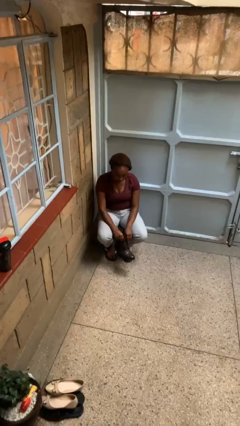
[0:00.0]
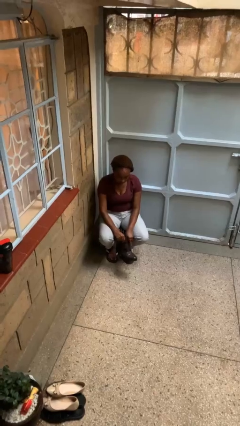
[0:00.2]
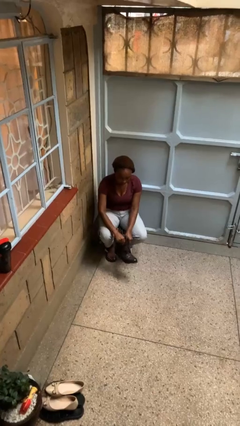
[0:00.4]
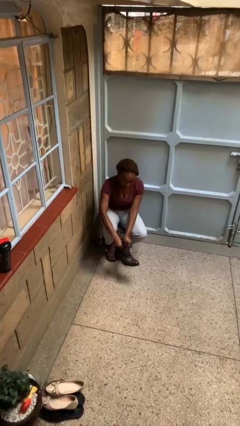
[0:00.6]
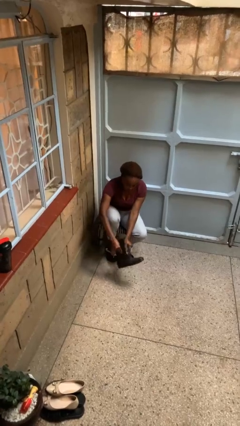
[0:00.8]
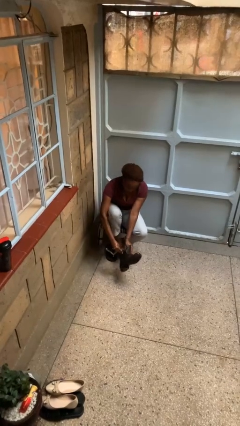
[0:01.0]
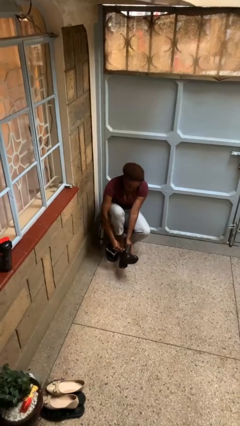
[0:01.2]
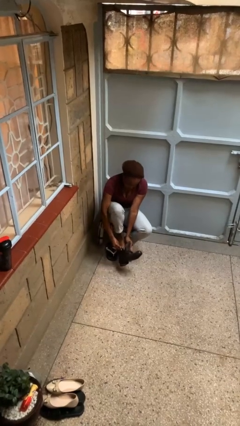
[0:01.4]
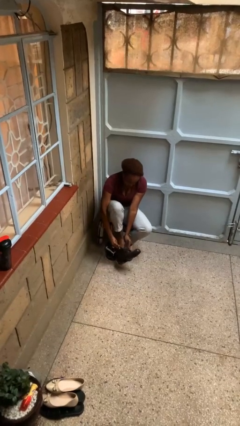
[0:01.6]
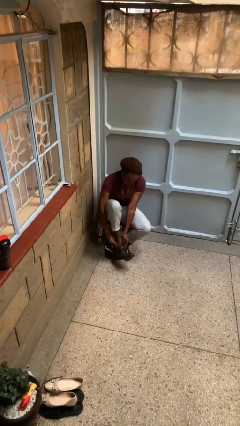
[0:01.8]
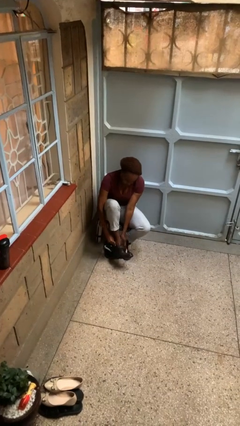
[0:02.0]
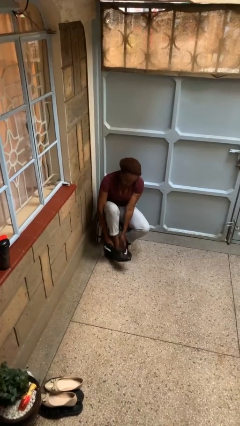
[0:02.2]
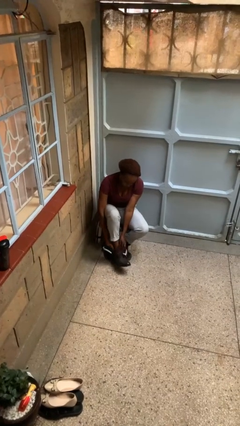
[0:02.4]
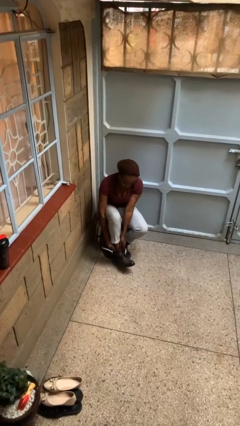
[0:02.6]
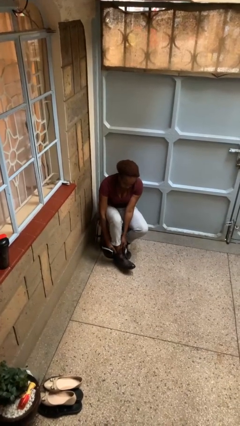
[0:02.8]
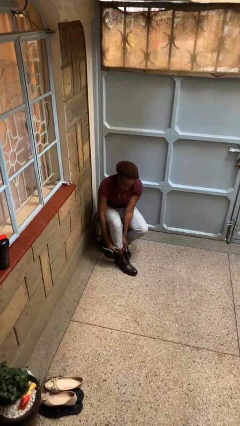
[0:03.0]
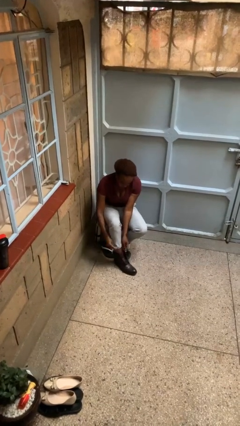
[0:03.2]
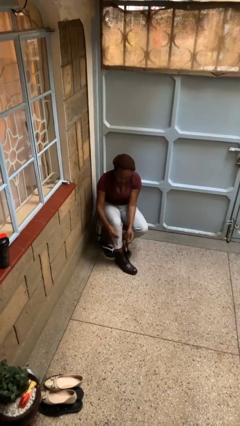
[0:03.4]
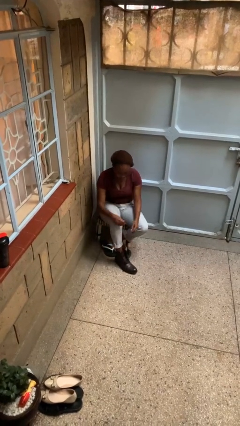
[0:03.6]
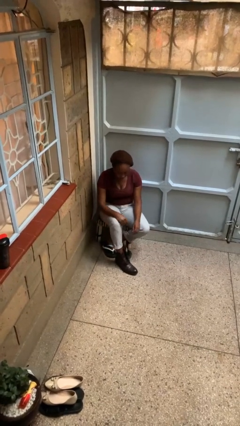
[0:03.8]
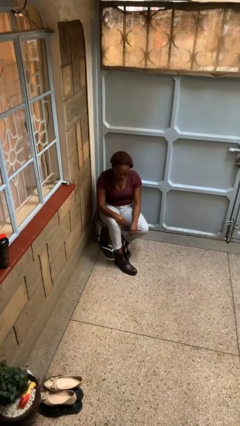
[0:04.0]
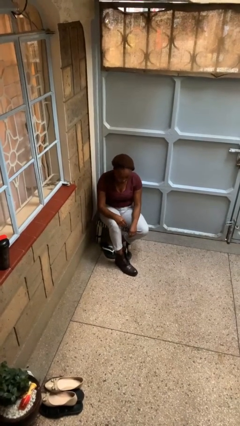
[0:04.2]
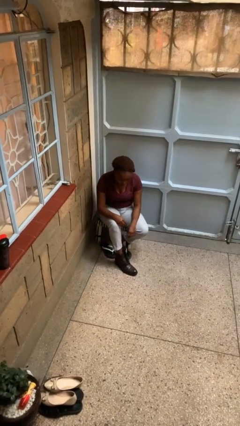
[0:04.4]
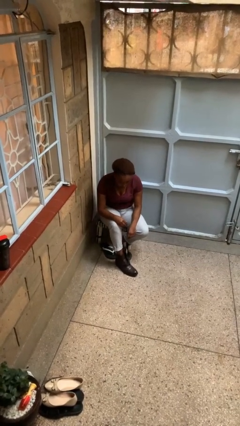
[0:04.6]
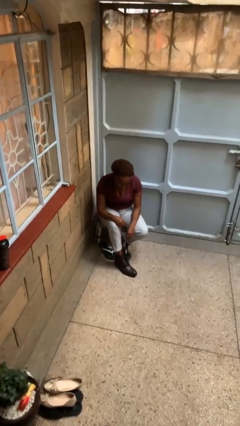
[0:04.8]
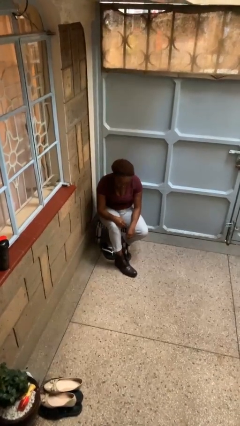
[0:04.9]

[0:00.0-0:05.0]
person puts on boots

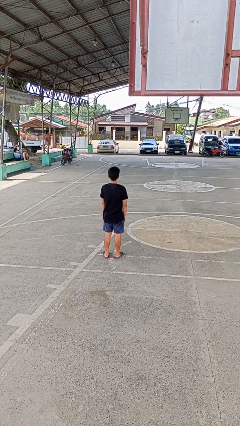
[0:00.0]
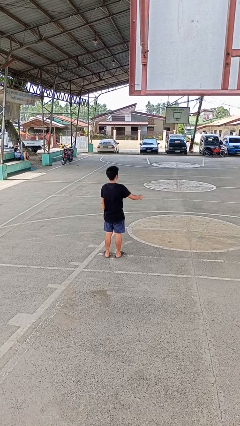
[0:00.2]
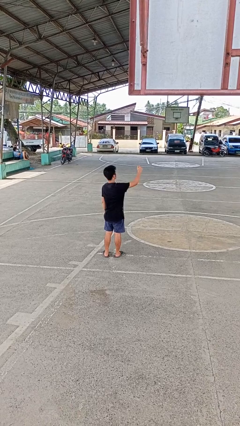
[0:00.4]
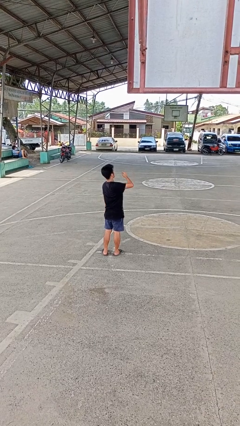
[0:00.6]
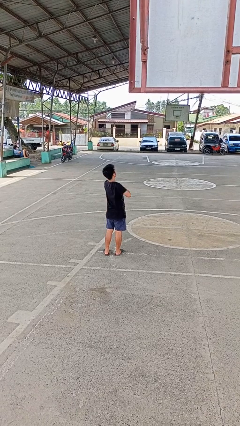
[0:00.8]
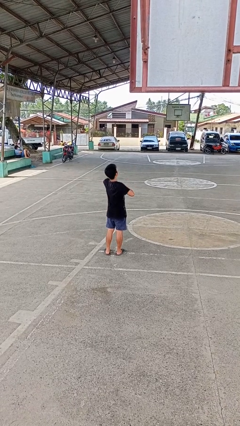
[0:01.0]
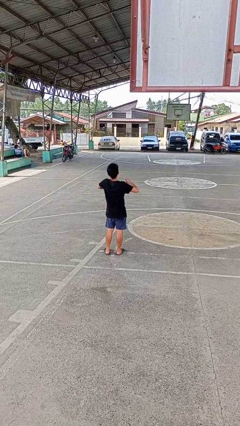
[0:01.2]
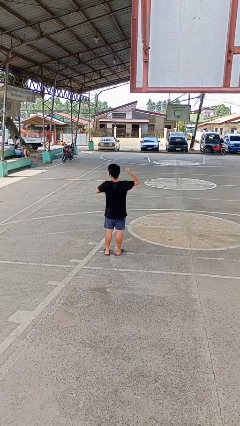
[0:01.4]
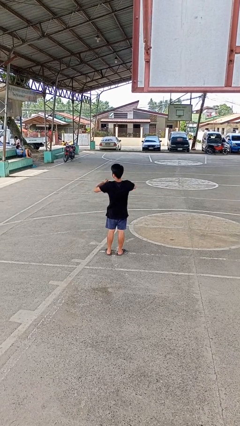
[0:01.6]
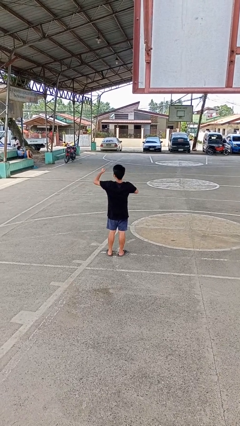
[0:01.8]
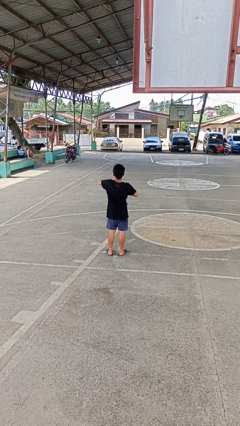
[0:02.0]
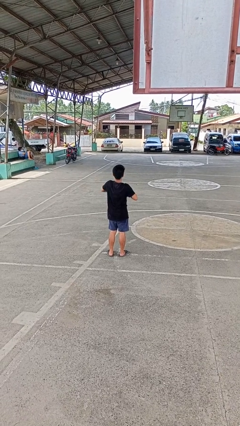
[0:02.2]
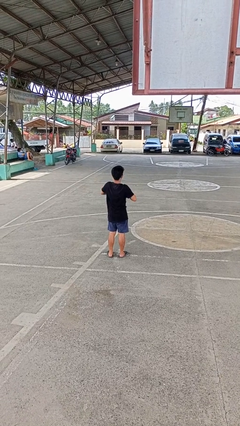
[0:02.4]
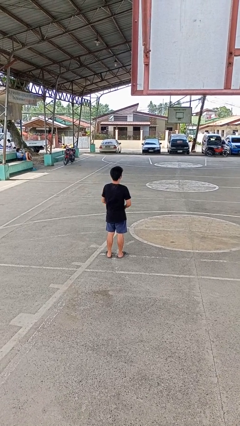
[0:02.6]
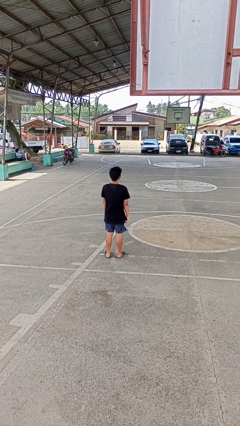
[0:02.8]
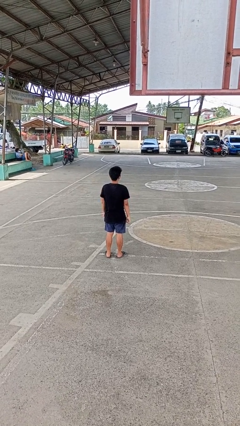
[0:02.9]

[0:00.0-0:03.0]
person drums on chest

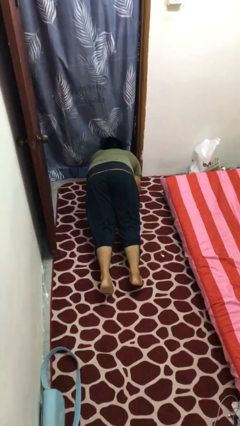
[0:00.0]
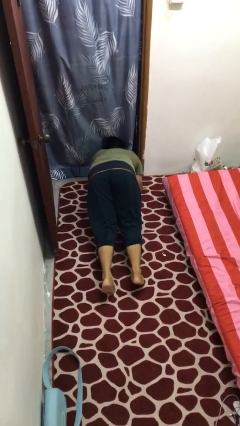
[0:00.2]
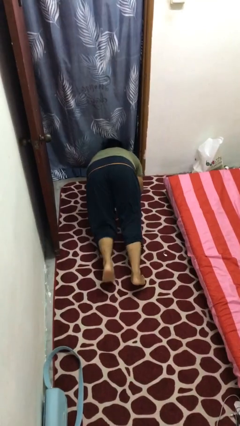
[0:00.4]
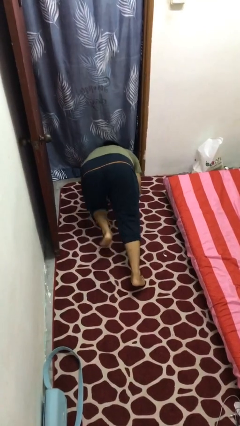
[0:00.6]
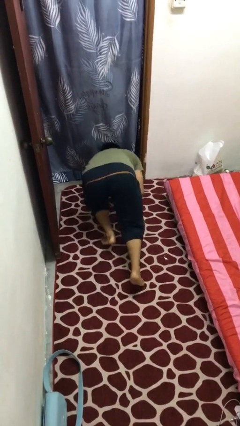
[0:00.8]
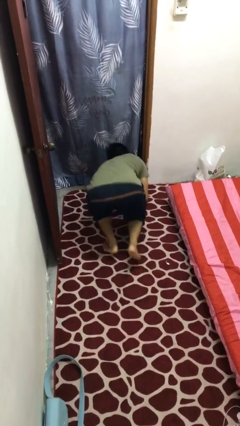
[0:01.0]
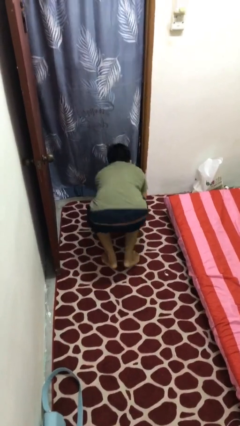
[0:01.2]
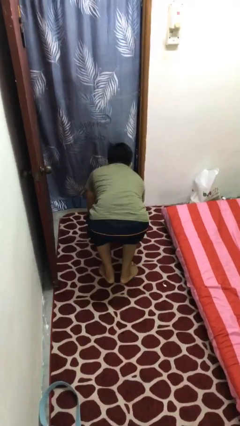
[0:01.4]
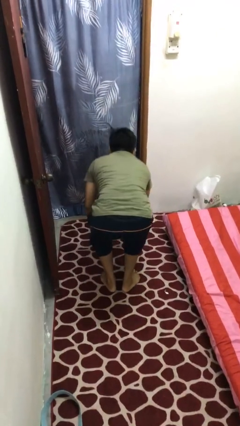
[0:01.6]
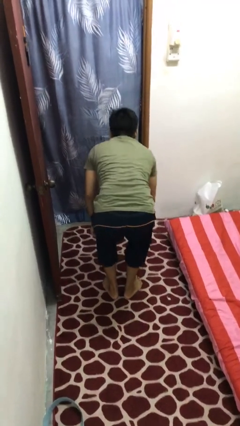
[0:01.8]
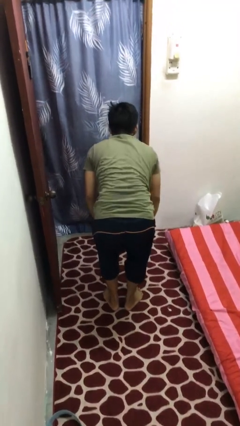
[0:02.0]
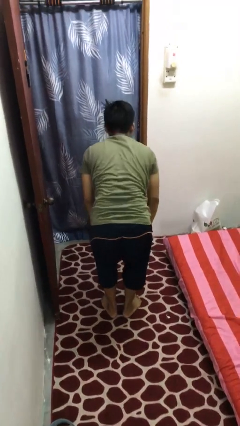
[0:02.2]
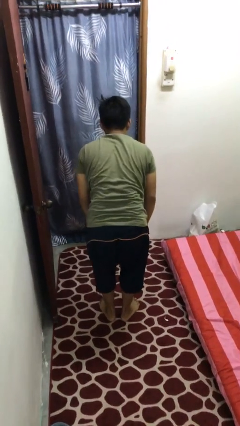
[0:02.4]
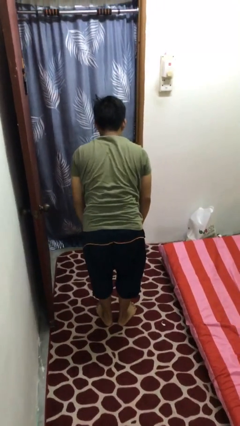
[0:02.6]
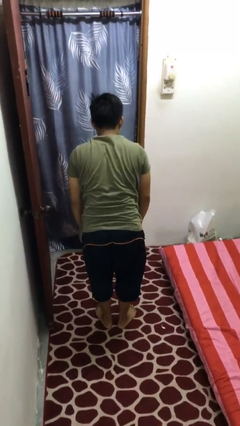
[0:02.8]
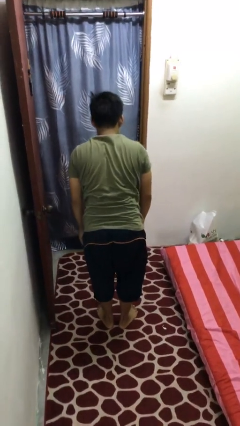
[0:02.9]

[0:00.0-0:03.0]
person stands up from floor

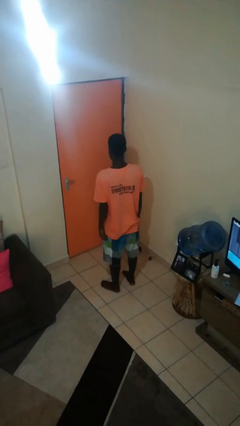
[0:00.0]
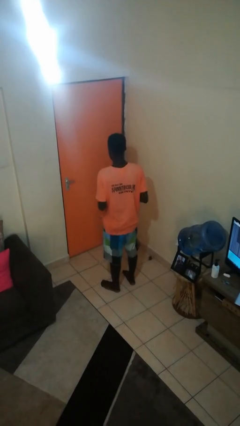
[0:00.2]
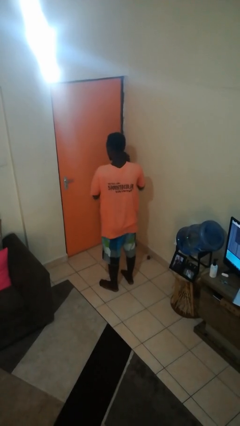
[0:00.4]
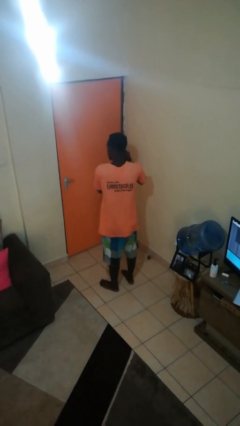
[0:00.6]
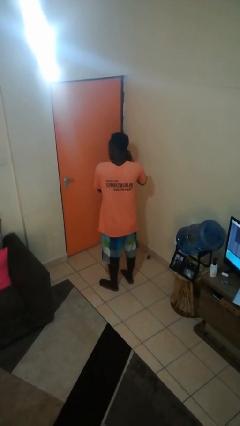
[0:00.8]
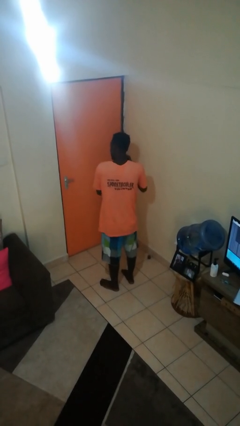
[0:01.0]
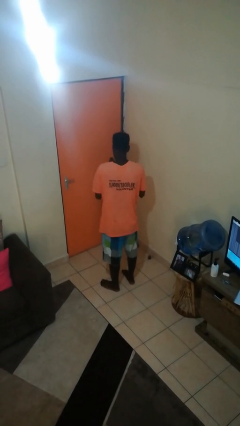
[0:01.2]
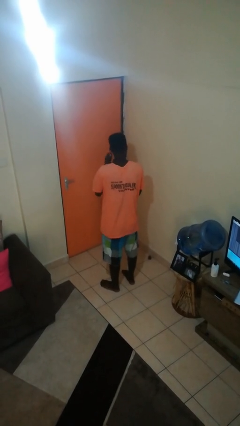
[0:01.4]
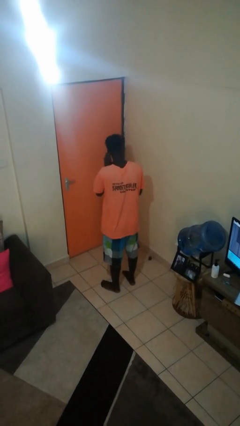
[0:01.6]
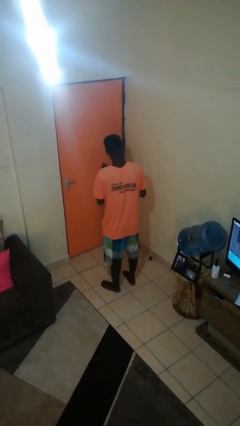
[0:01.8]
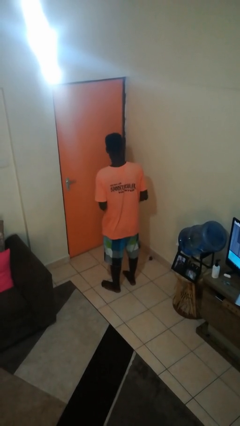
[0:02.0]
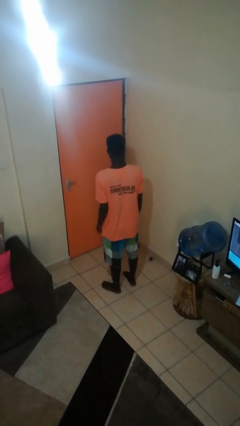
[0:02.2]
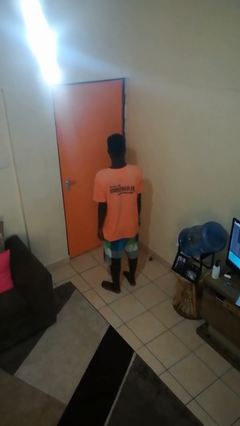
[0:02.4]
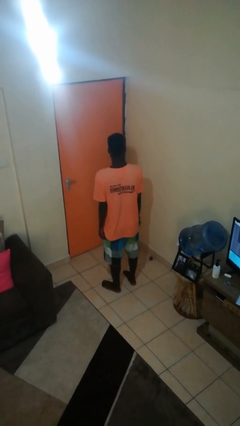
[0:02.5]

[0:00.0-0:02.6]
person takes off earrings

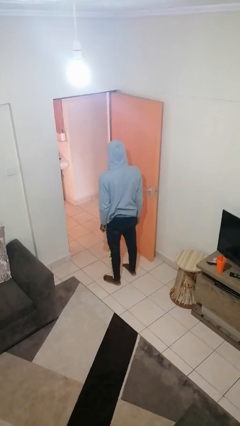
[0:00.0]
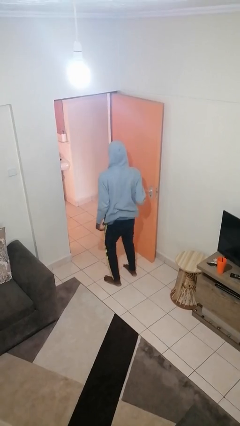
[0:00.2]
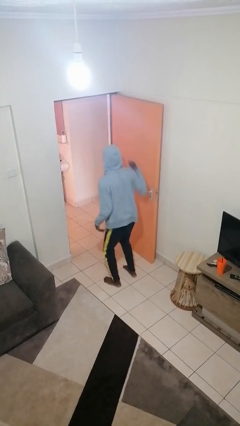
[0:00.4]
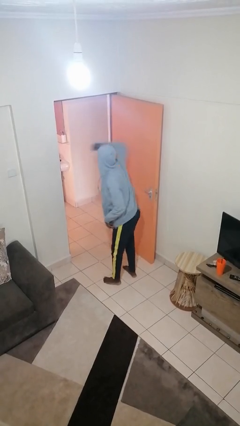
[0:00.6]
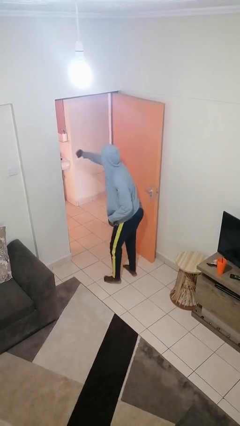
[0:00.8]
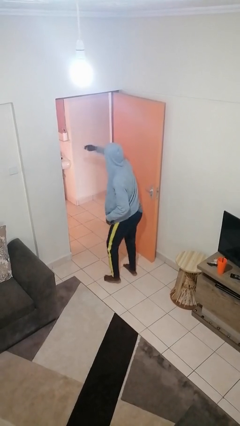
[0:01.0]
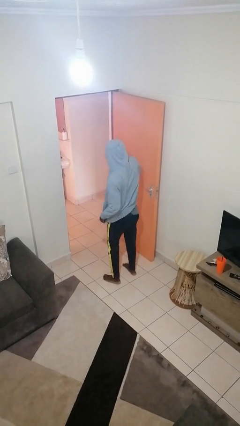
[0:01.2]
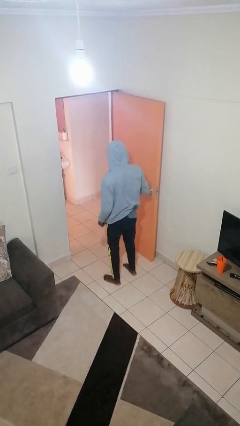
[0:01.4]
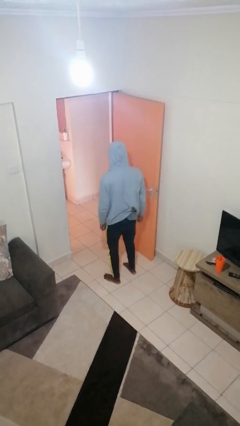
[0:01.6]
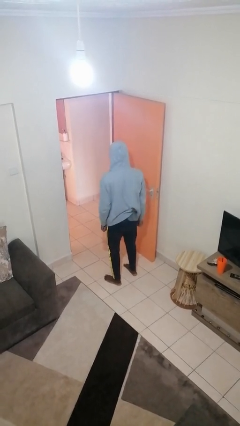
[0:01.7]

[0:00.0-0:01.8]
person punches

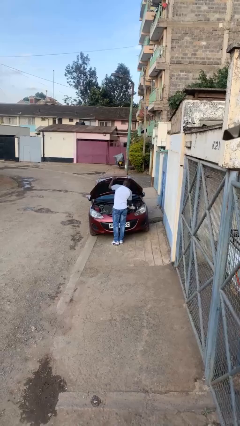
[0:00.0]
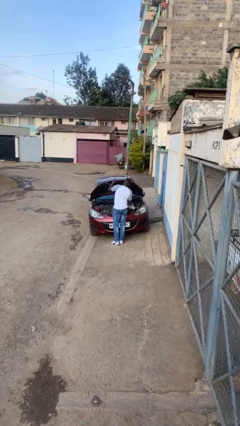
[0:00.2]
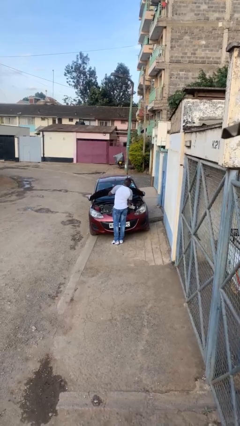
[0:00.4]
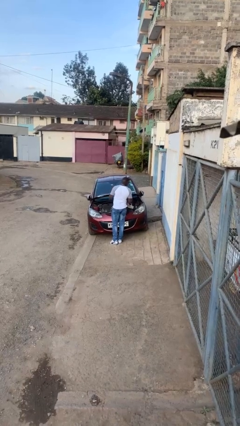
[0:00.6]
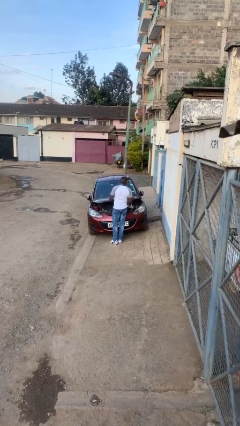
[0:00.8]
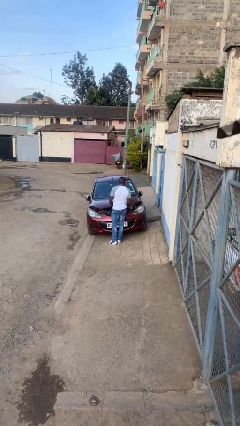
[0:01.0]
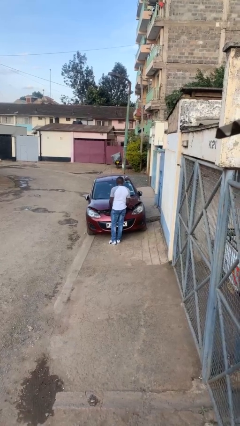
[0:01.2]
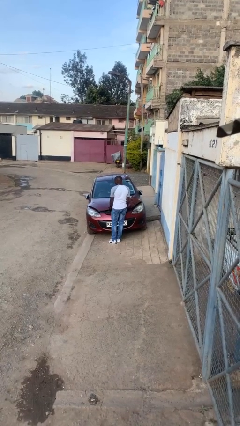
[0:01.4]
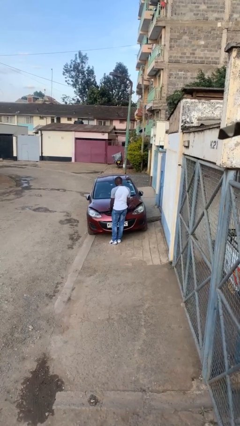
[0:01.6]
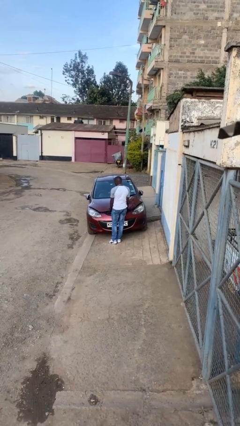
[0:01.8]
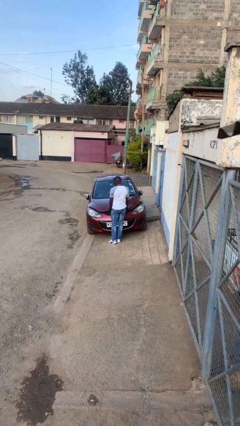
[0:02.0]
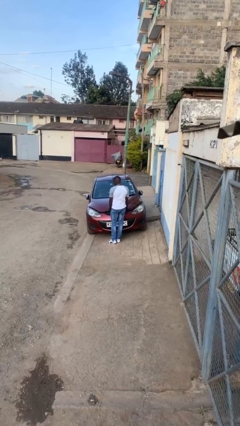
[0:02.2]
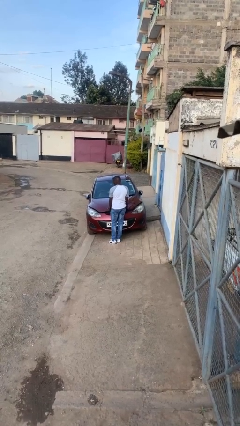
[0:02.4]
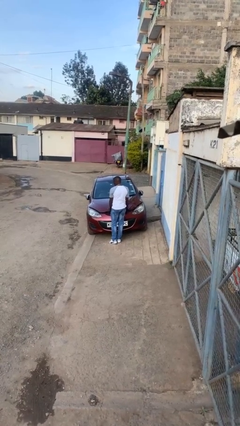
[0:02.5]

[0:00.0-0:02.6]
person closes car hood
